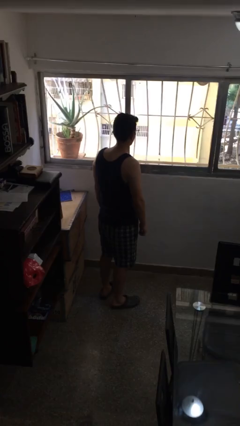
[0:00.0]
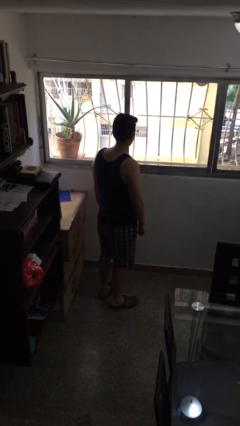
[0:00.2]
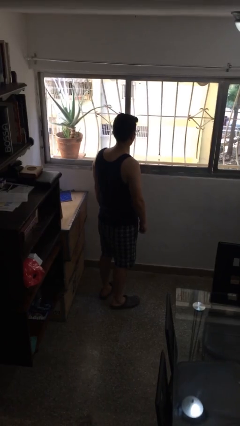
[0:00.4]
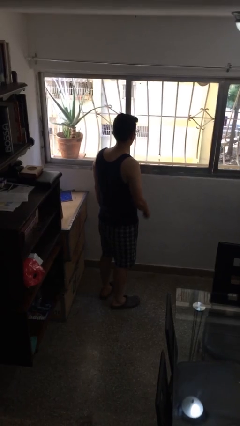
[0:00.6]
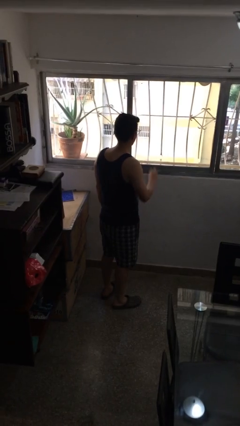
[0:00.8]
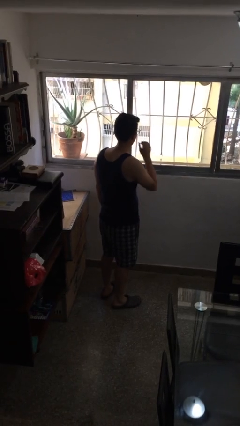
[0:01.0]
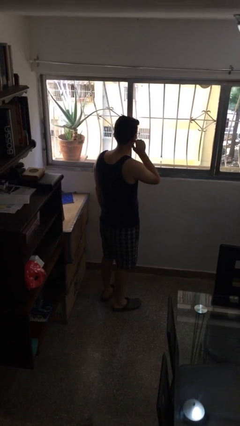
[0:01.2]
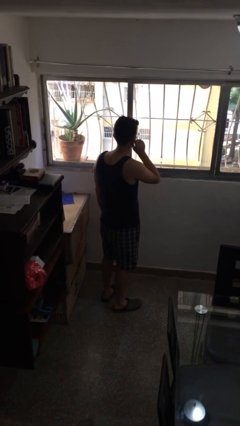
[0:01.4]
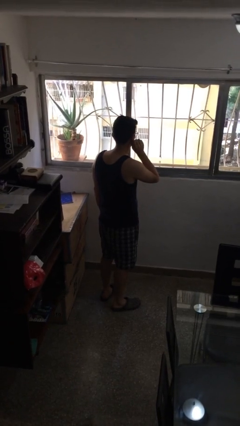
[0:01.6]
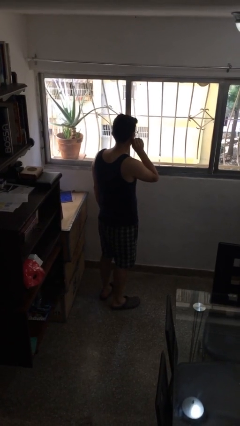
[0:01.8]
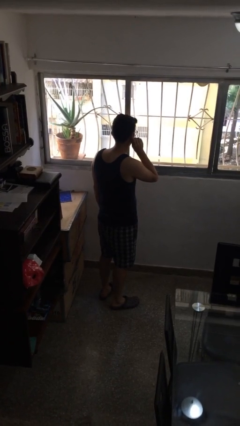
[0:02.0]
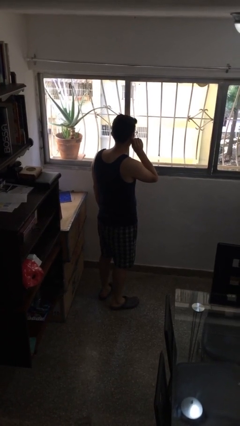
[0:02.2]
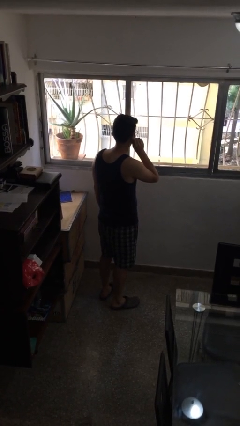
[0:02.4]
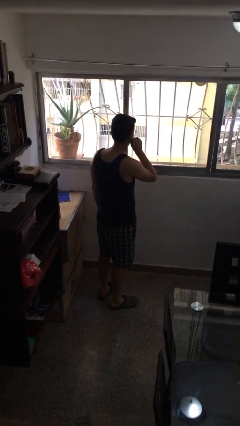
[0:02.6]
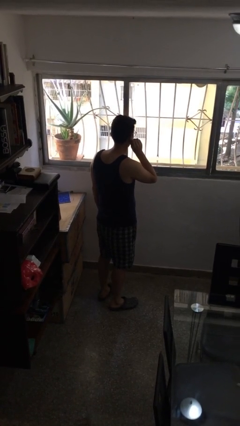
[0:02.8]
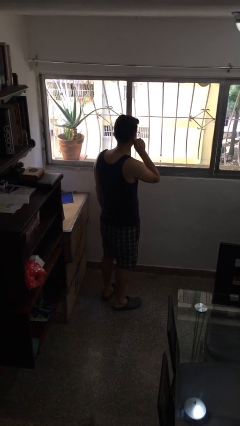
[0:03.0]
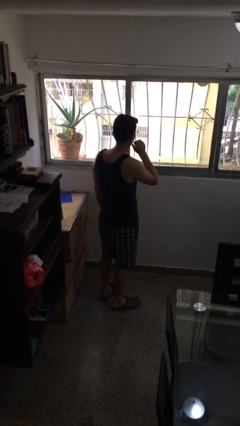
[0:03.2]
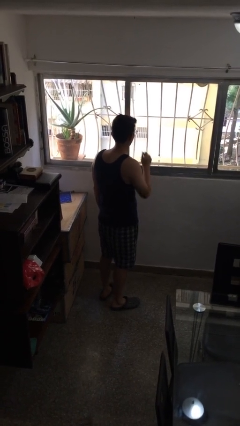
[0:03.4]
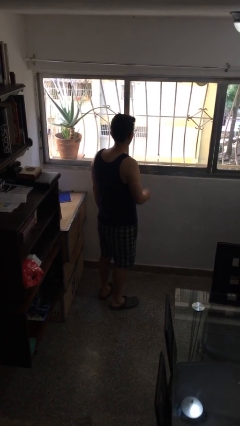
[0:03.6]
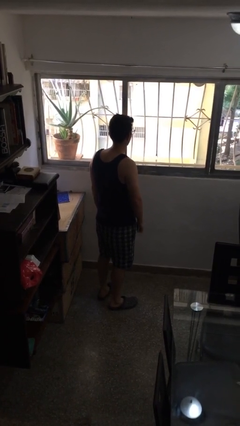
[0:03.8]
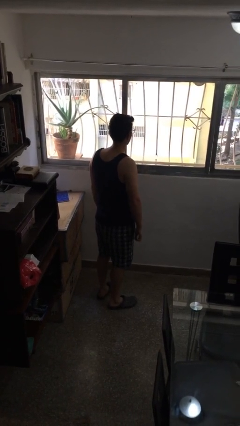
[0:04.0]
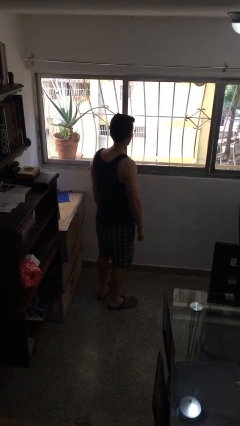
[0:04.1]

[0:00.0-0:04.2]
person touches earlobe

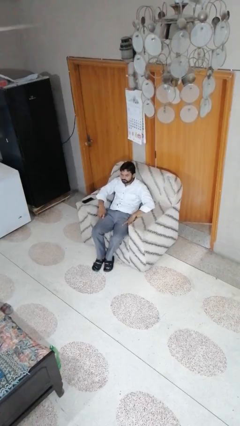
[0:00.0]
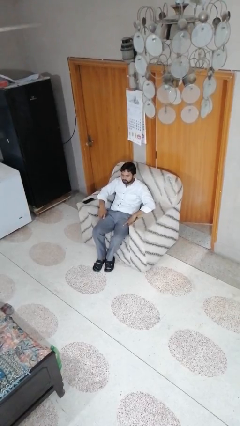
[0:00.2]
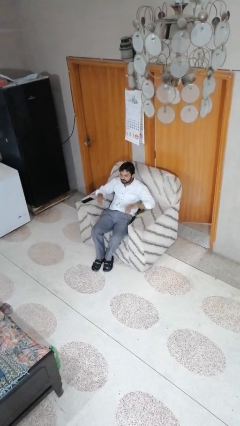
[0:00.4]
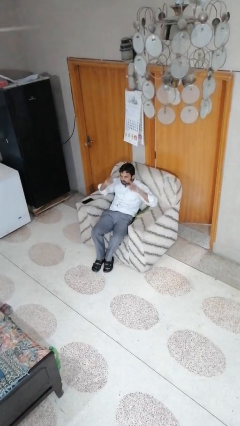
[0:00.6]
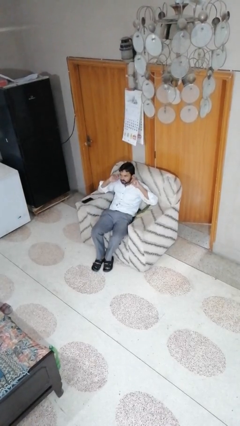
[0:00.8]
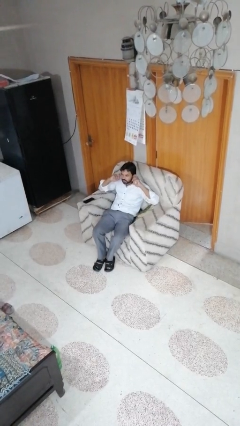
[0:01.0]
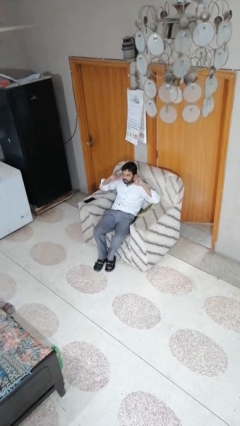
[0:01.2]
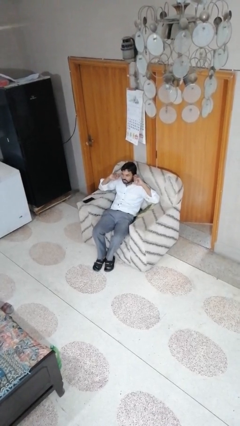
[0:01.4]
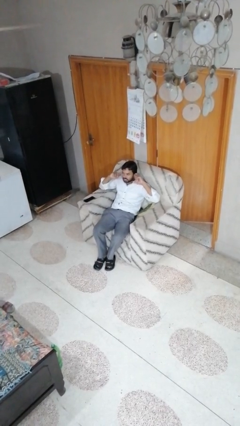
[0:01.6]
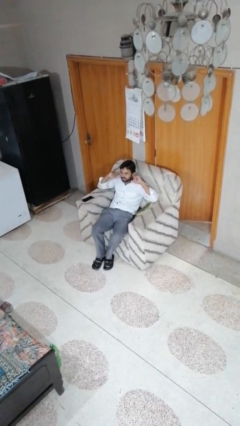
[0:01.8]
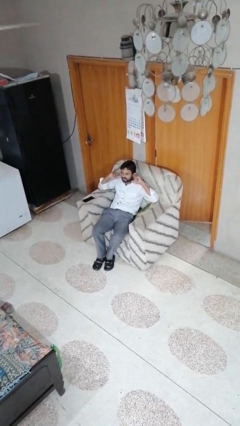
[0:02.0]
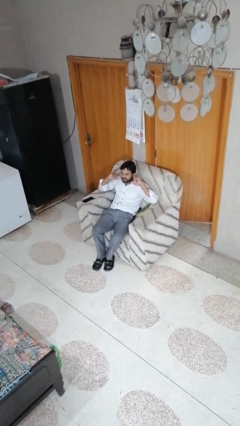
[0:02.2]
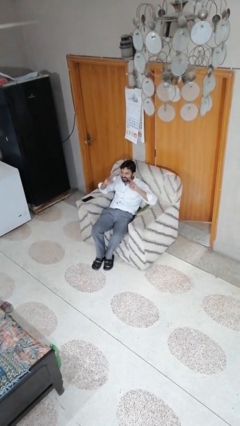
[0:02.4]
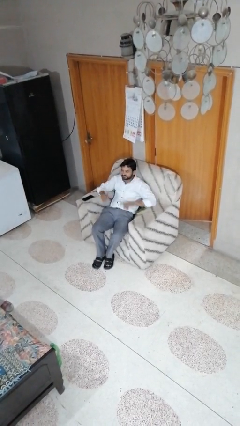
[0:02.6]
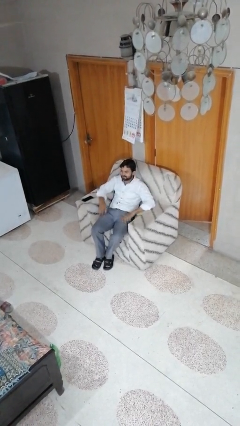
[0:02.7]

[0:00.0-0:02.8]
person puts fingers in ear

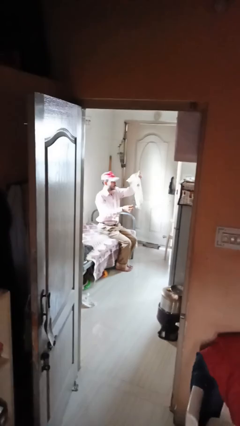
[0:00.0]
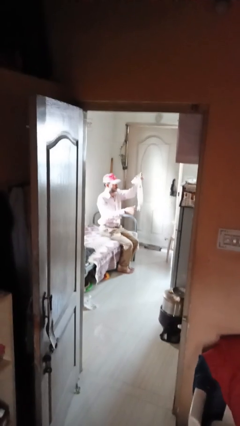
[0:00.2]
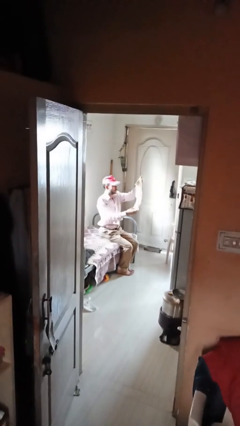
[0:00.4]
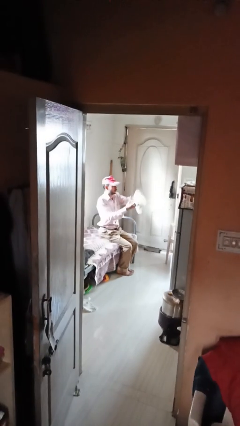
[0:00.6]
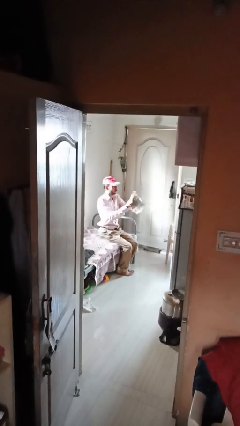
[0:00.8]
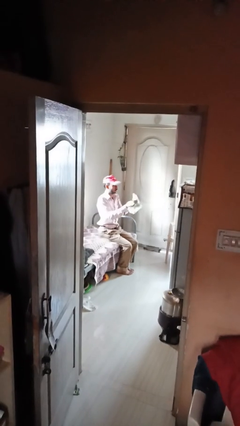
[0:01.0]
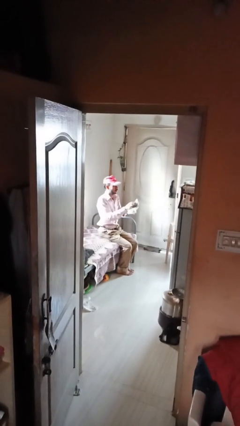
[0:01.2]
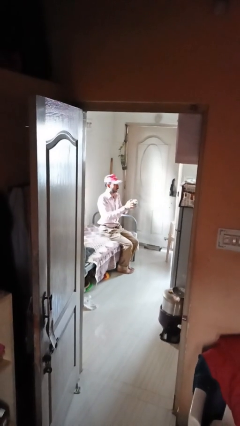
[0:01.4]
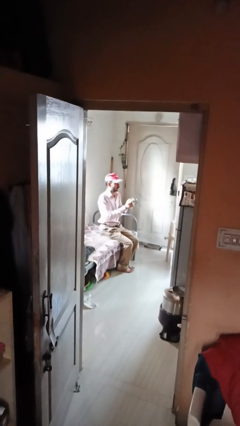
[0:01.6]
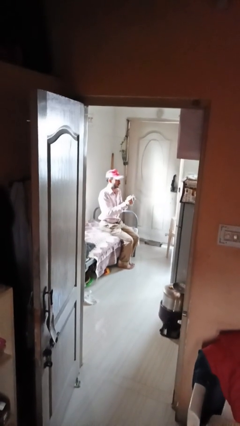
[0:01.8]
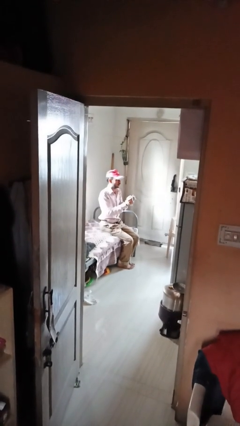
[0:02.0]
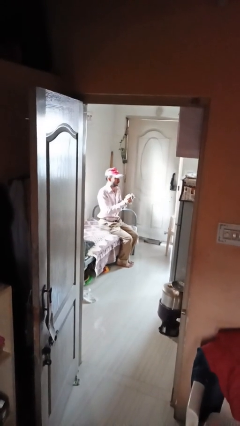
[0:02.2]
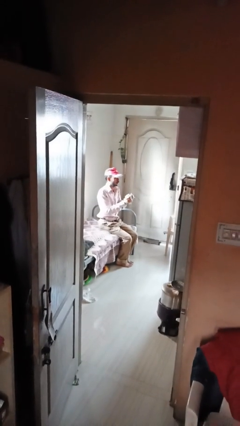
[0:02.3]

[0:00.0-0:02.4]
person crumples paper

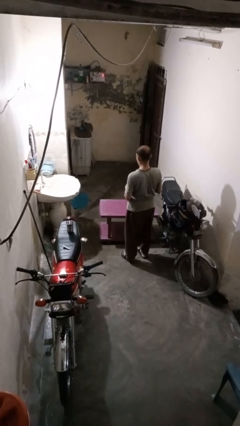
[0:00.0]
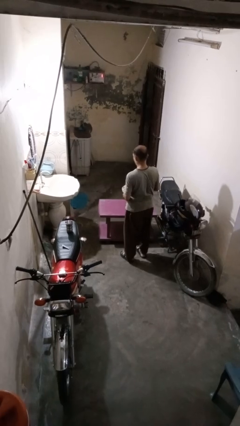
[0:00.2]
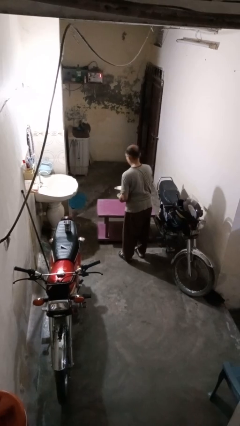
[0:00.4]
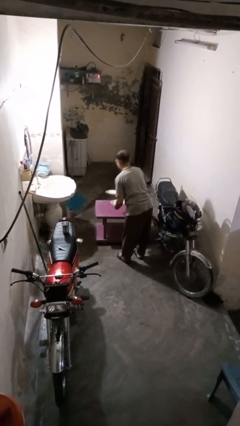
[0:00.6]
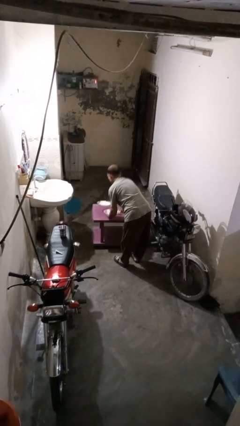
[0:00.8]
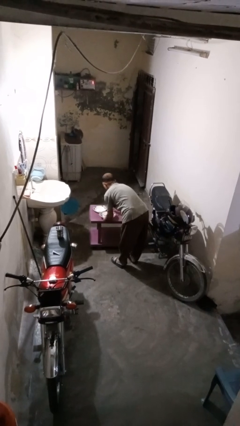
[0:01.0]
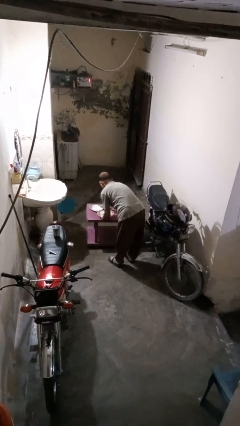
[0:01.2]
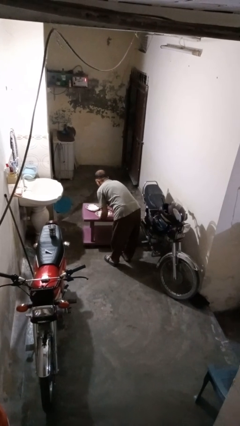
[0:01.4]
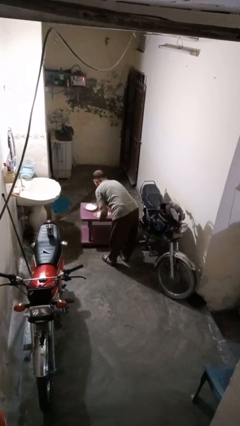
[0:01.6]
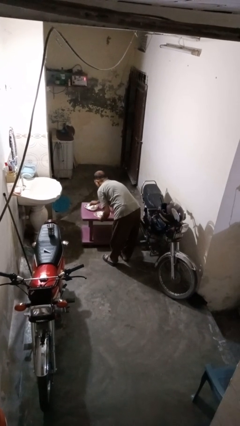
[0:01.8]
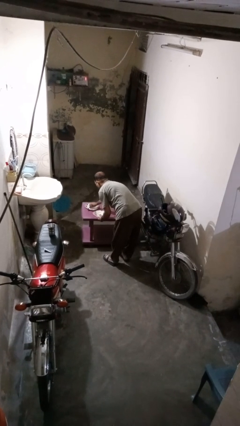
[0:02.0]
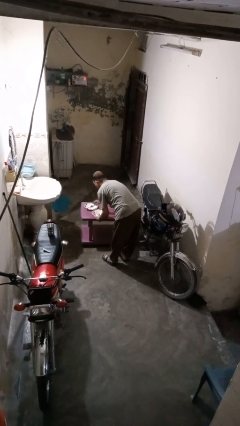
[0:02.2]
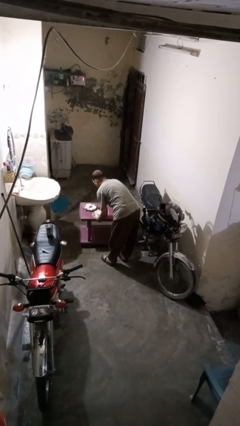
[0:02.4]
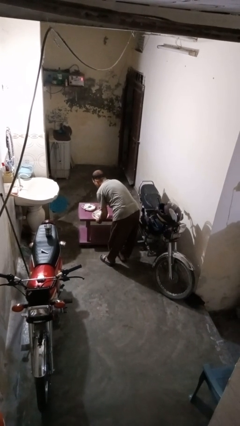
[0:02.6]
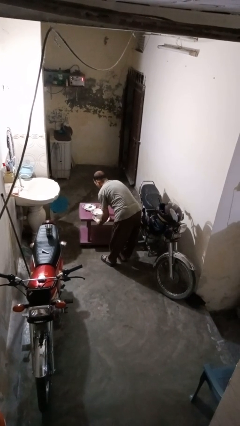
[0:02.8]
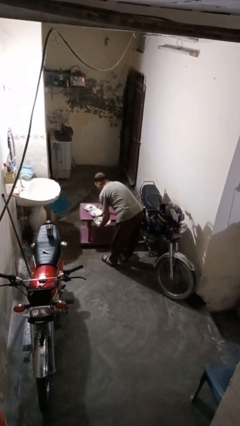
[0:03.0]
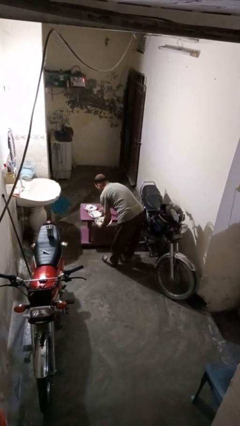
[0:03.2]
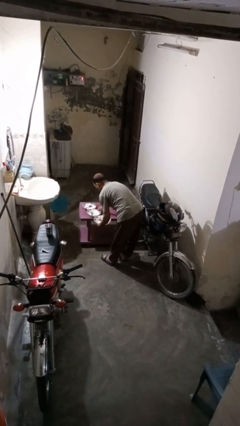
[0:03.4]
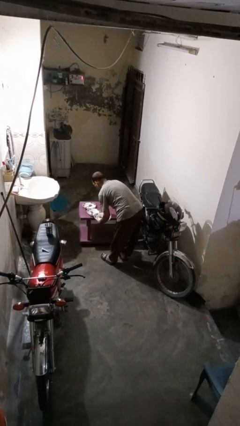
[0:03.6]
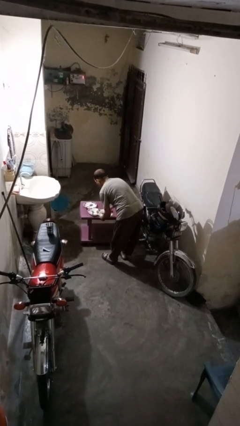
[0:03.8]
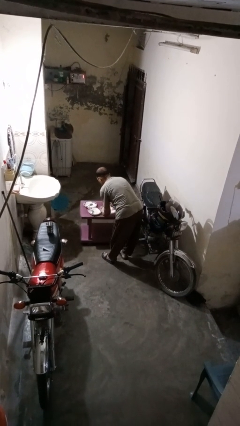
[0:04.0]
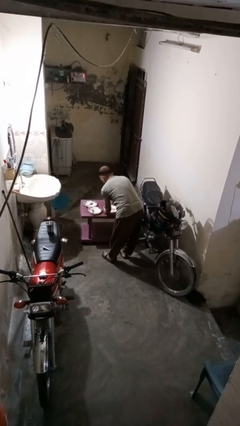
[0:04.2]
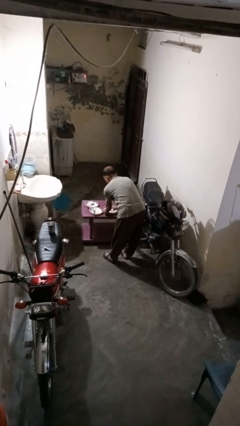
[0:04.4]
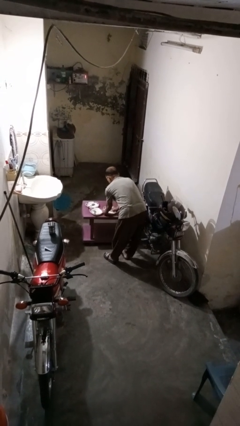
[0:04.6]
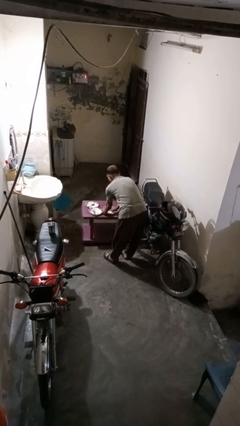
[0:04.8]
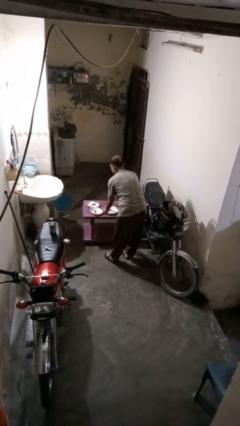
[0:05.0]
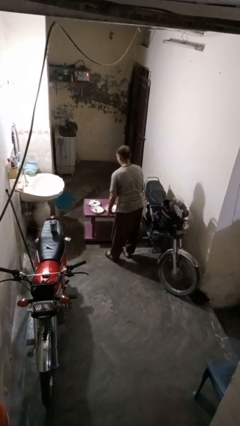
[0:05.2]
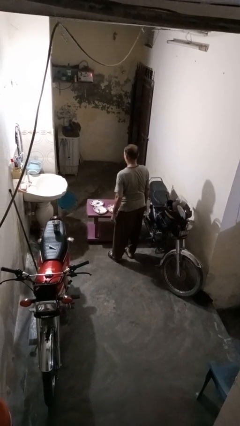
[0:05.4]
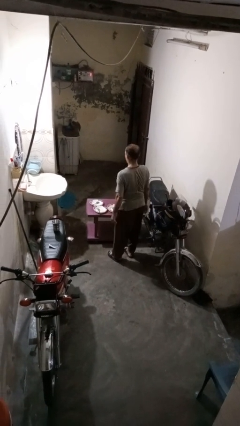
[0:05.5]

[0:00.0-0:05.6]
person sets table

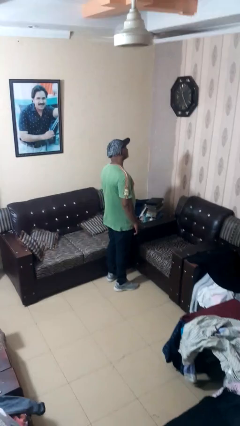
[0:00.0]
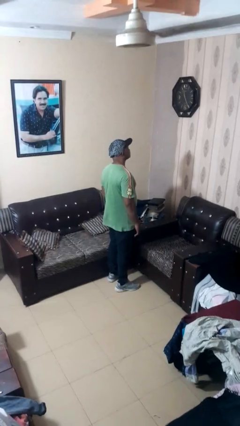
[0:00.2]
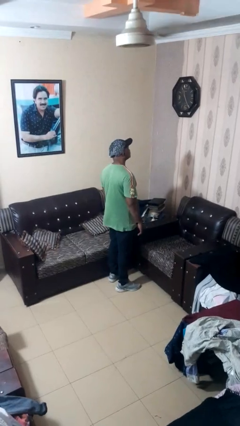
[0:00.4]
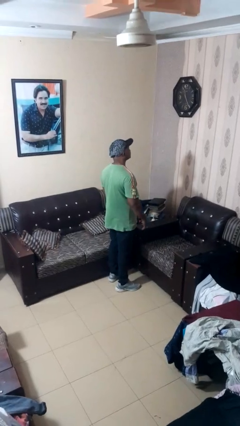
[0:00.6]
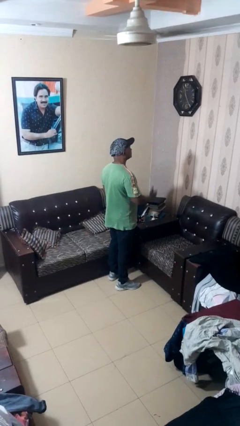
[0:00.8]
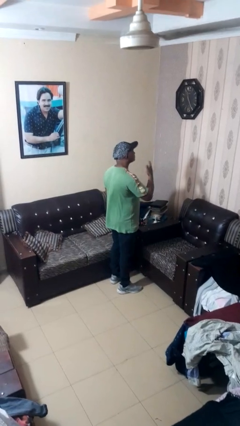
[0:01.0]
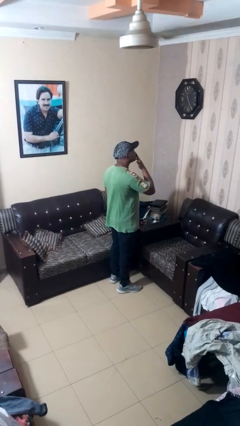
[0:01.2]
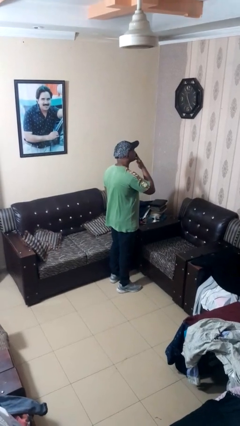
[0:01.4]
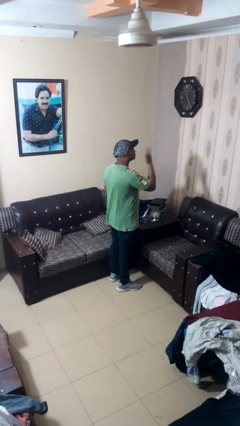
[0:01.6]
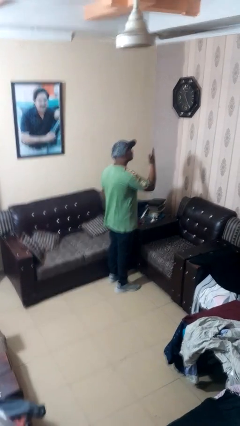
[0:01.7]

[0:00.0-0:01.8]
person gestures blow kiss

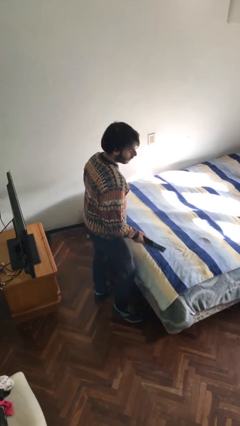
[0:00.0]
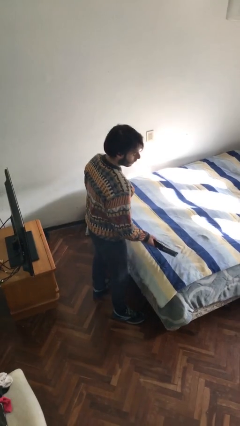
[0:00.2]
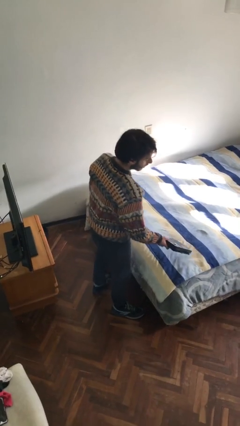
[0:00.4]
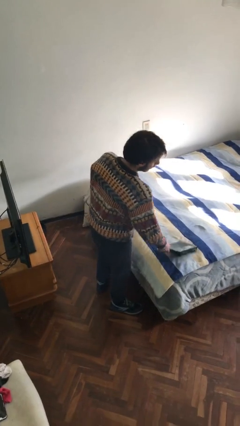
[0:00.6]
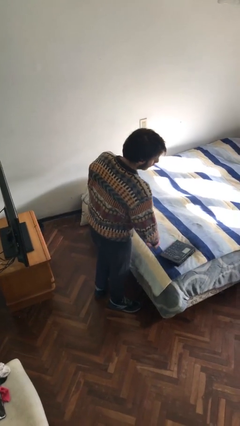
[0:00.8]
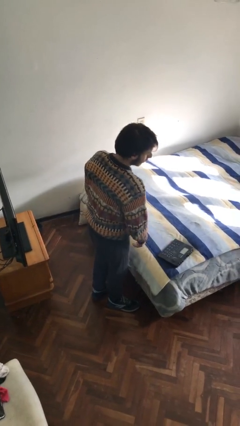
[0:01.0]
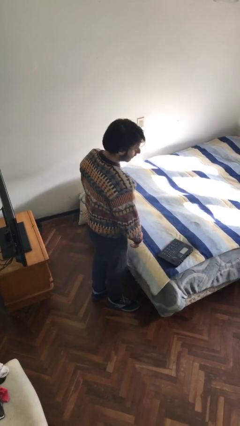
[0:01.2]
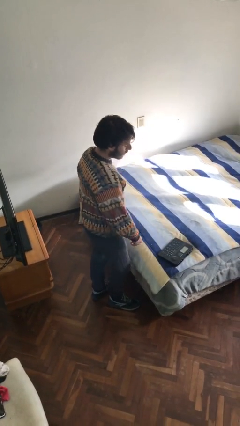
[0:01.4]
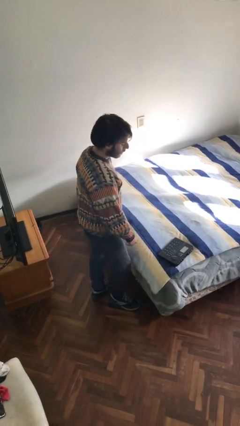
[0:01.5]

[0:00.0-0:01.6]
person puts down object on bed
